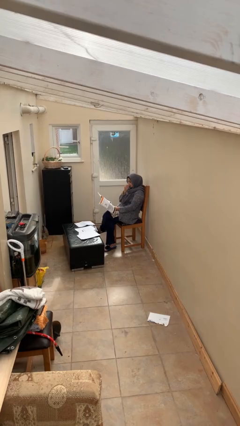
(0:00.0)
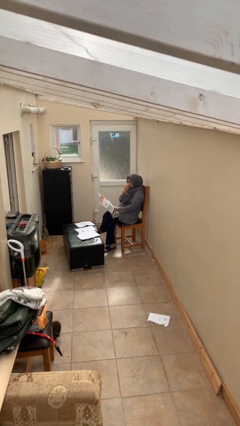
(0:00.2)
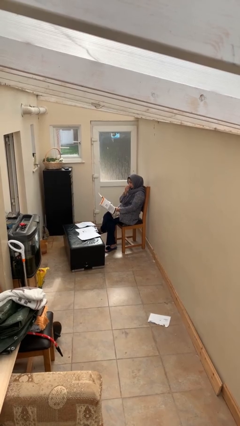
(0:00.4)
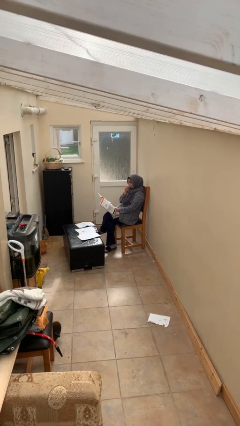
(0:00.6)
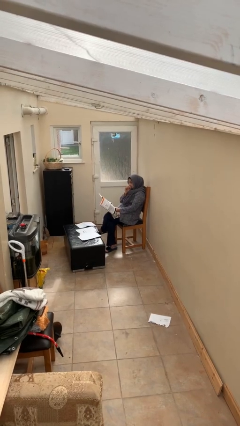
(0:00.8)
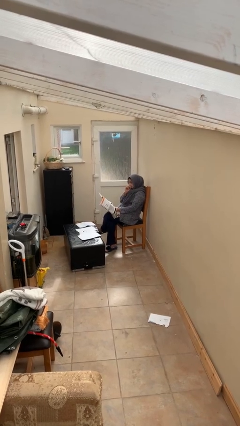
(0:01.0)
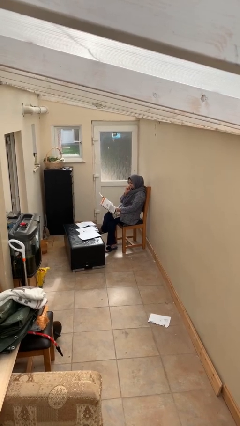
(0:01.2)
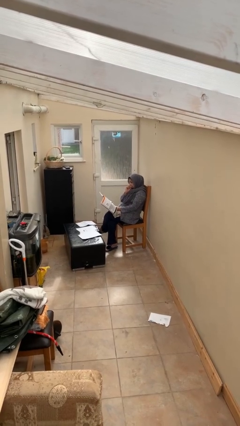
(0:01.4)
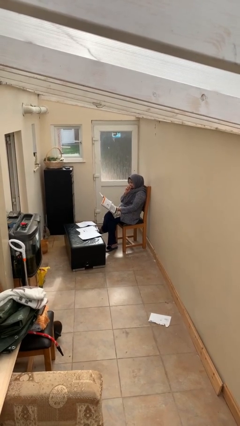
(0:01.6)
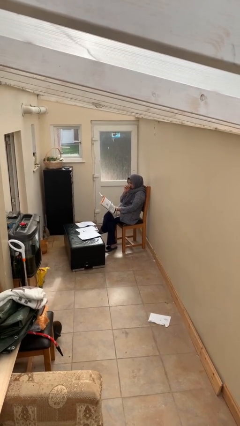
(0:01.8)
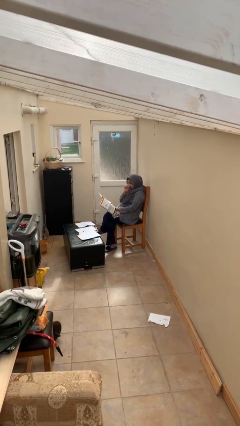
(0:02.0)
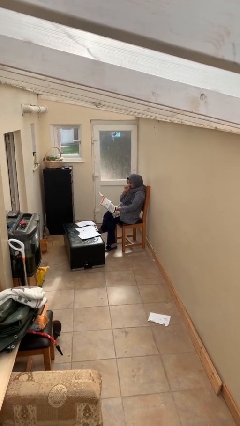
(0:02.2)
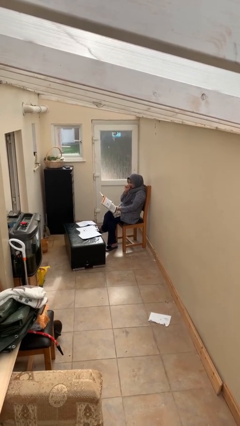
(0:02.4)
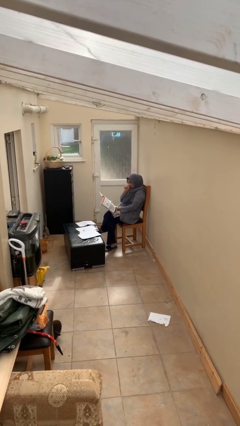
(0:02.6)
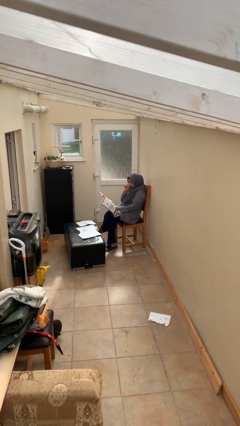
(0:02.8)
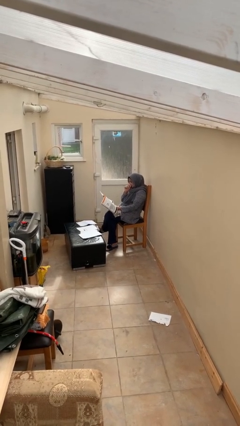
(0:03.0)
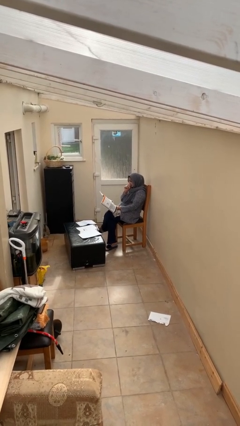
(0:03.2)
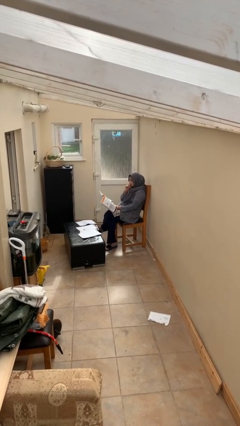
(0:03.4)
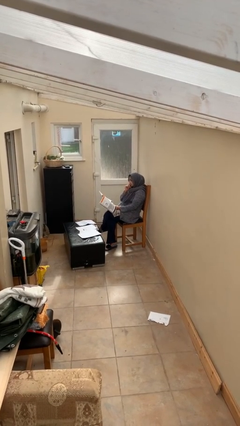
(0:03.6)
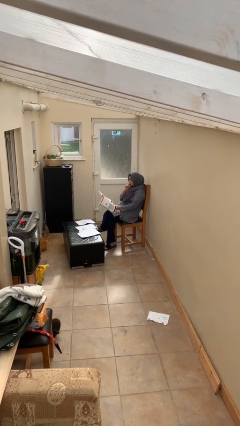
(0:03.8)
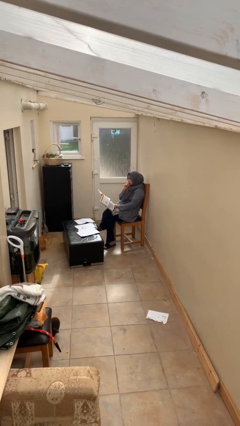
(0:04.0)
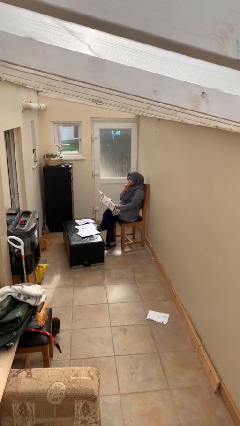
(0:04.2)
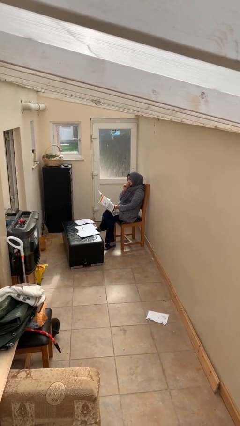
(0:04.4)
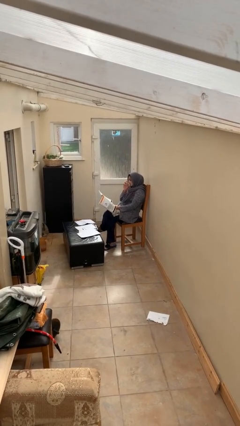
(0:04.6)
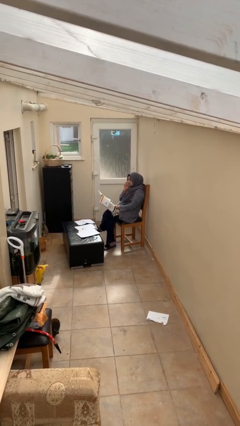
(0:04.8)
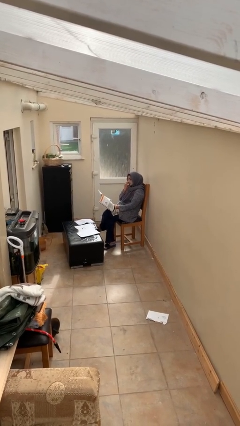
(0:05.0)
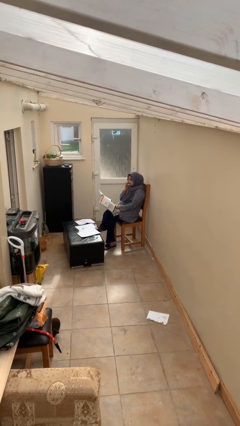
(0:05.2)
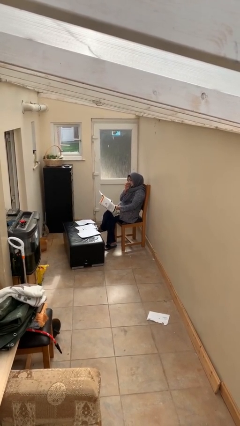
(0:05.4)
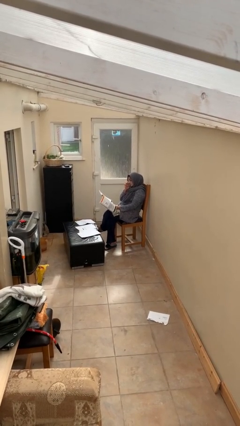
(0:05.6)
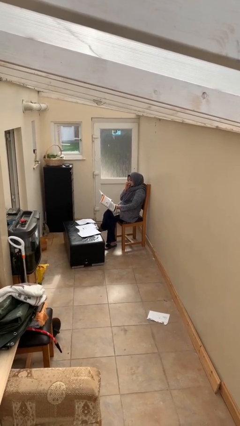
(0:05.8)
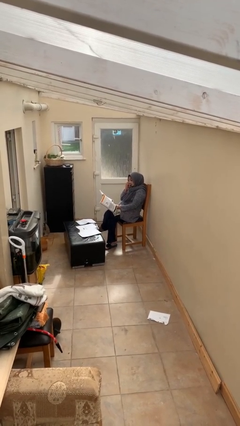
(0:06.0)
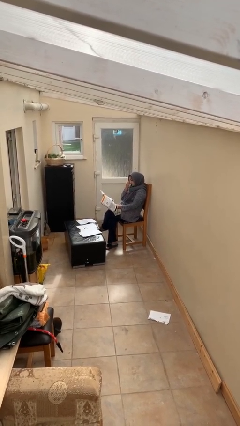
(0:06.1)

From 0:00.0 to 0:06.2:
person reads document

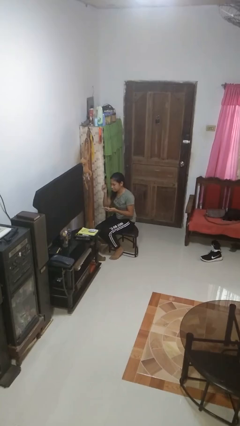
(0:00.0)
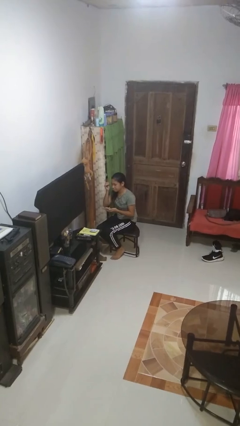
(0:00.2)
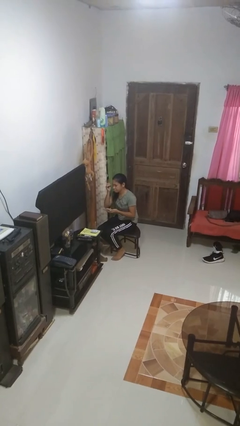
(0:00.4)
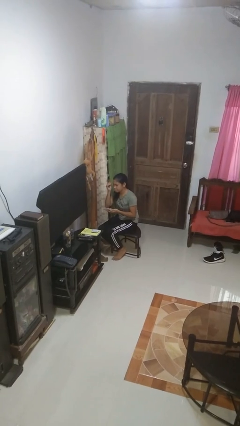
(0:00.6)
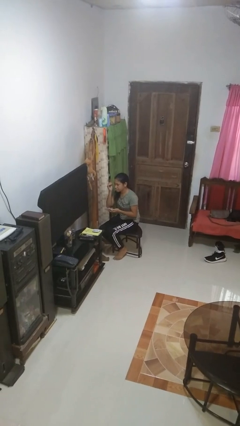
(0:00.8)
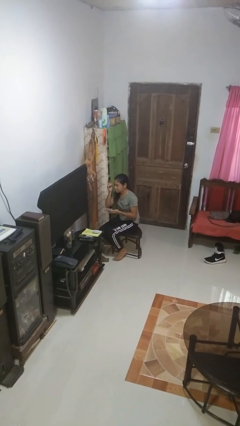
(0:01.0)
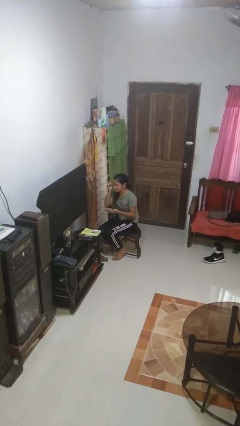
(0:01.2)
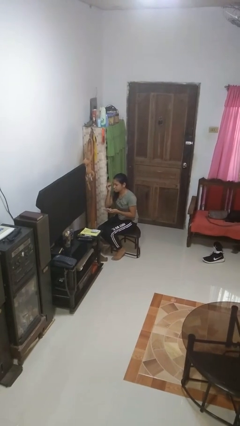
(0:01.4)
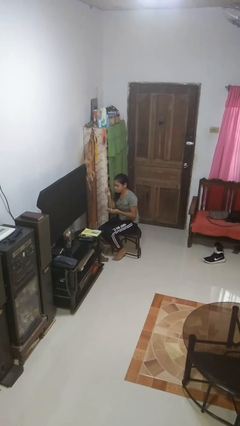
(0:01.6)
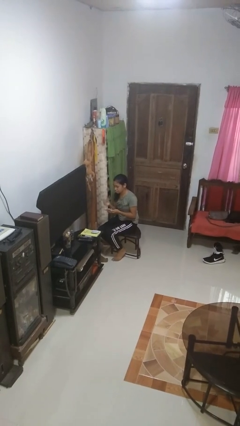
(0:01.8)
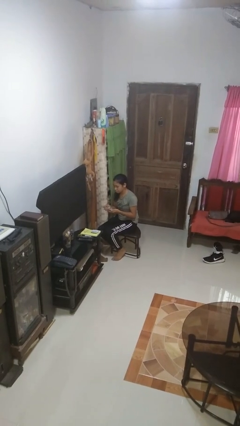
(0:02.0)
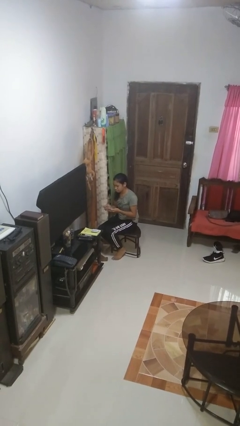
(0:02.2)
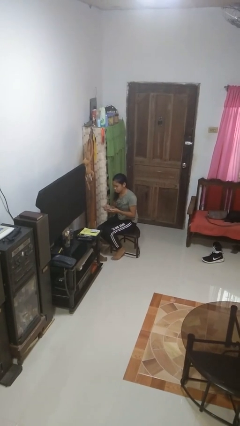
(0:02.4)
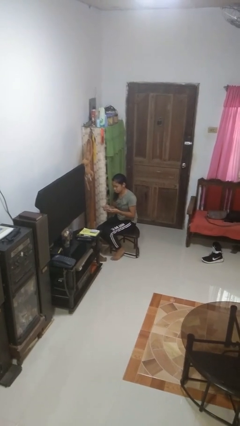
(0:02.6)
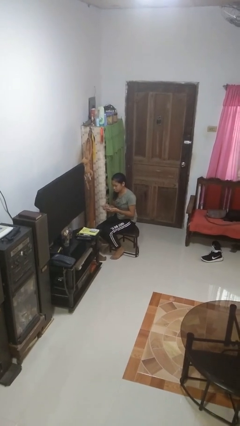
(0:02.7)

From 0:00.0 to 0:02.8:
person applies eye makeup

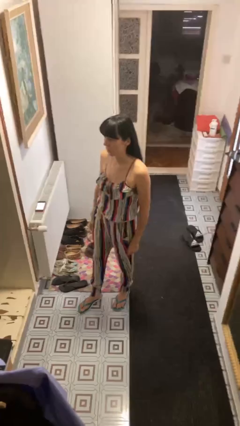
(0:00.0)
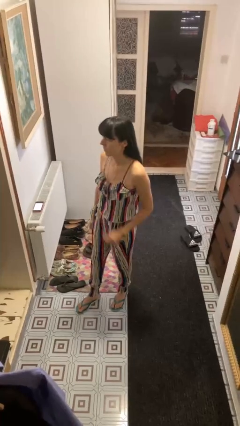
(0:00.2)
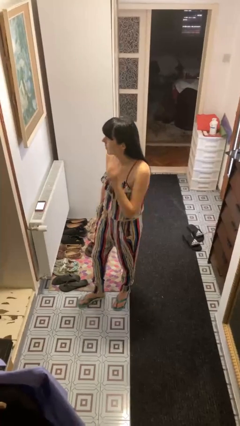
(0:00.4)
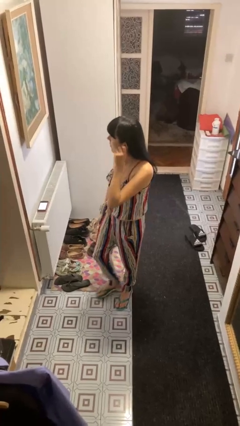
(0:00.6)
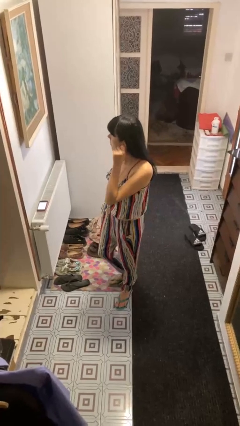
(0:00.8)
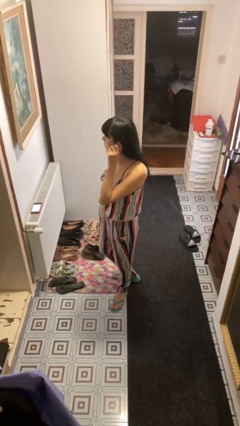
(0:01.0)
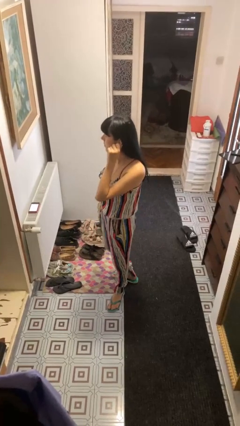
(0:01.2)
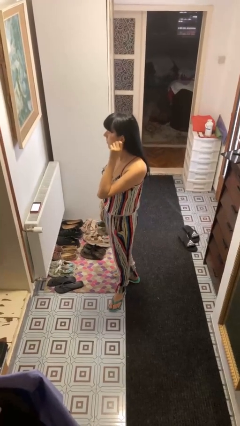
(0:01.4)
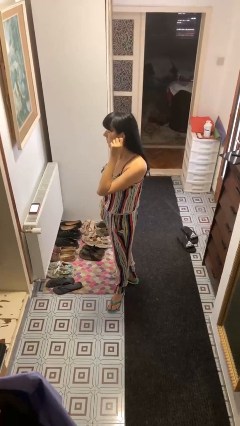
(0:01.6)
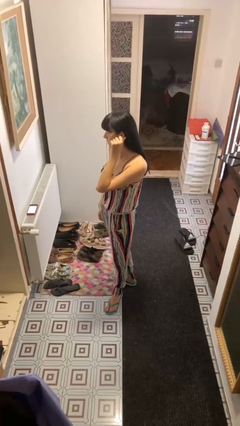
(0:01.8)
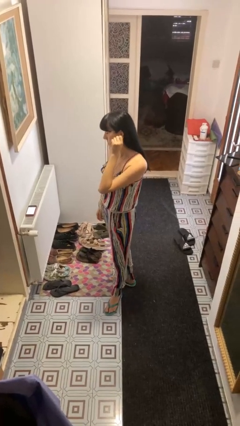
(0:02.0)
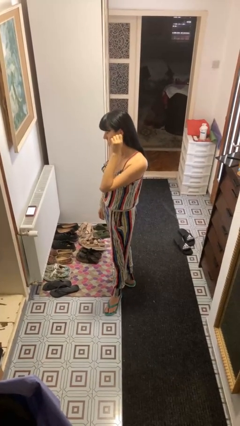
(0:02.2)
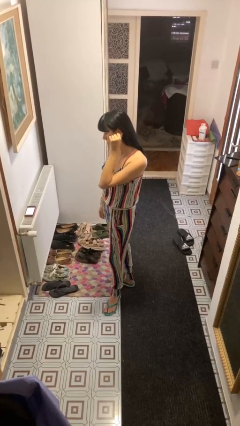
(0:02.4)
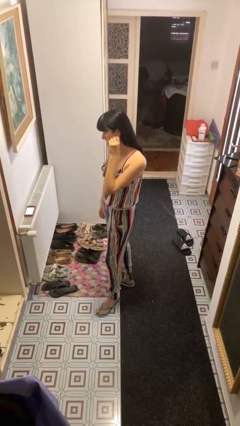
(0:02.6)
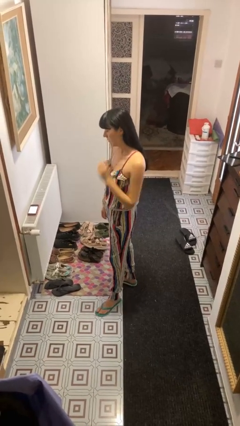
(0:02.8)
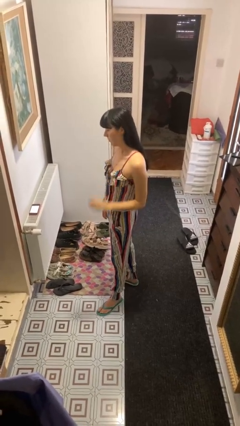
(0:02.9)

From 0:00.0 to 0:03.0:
person touches earlobe

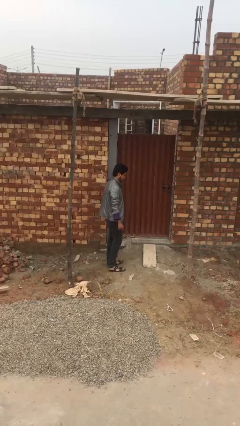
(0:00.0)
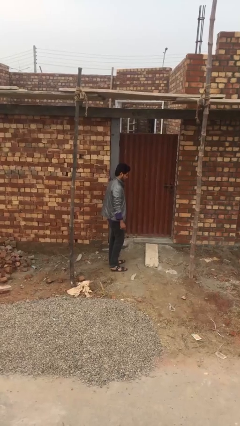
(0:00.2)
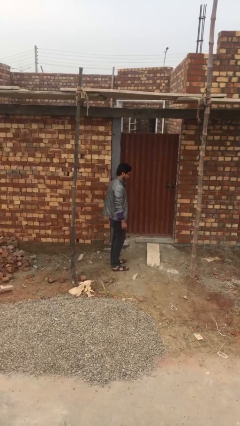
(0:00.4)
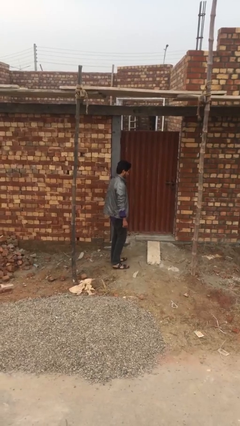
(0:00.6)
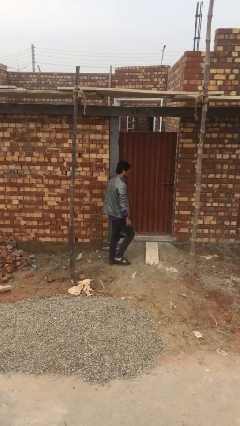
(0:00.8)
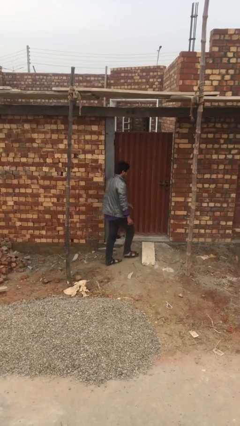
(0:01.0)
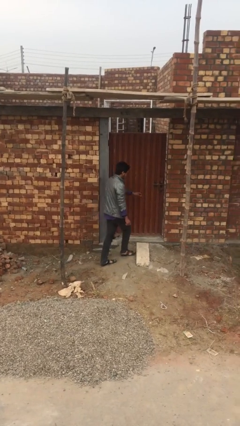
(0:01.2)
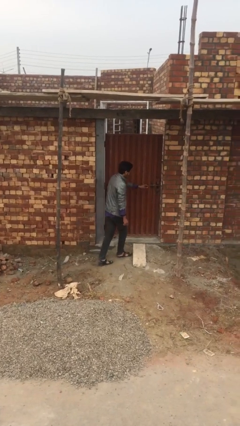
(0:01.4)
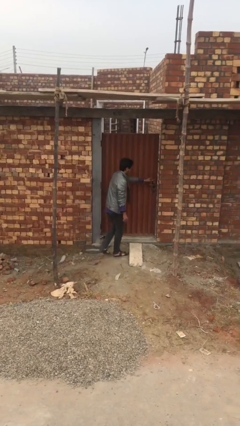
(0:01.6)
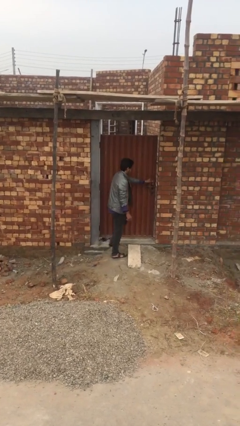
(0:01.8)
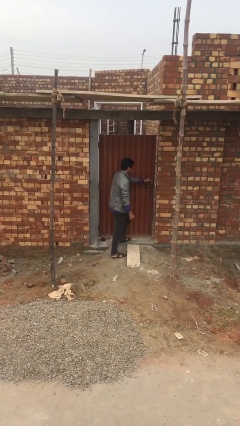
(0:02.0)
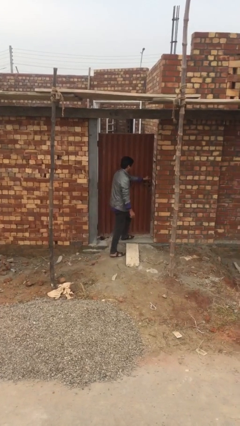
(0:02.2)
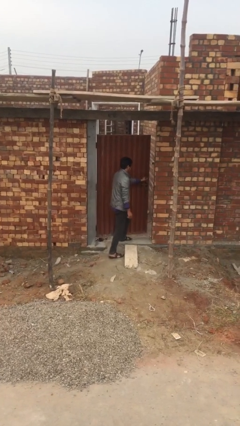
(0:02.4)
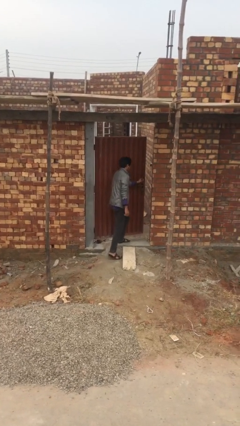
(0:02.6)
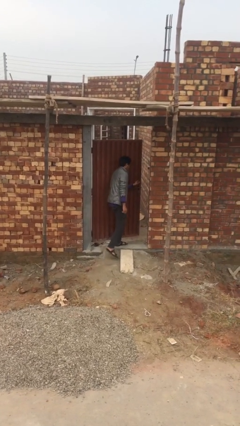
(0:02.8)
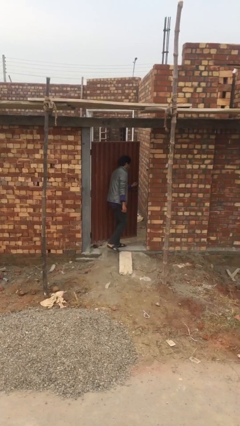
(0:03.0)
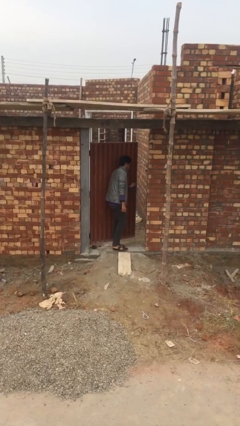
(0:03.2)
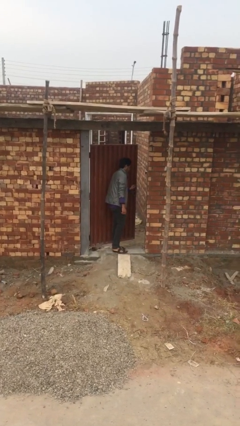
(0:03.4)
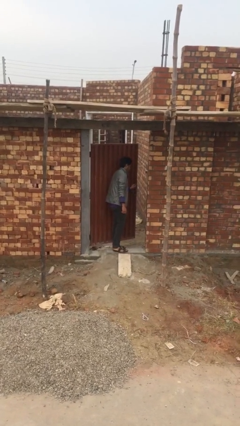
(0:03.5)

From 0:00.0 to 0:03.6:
person opens facility door

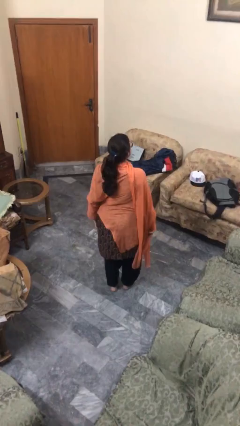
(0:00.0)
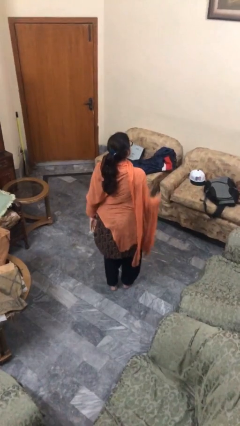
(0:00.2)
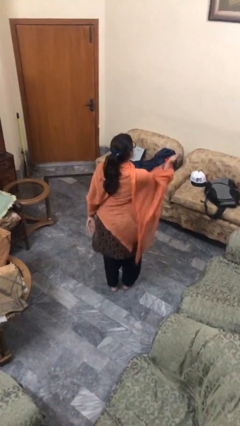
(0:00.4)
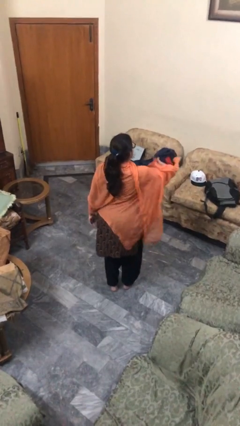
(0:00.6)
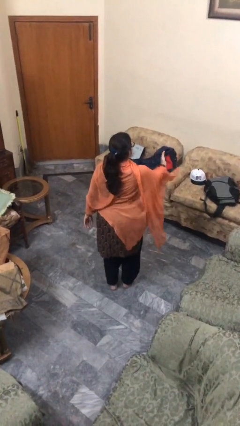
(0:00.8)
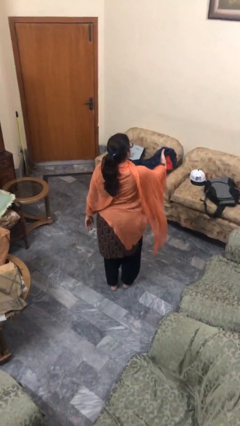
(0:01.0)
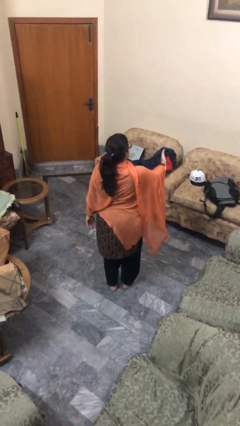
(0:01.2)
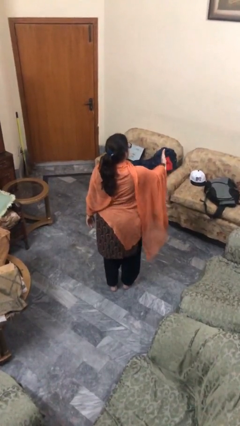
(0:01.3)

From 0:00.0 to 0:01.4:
person karate chop

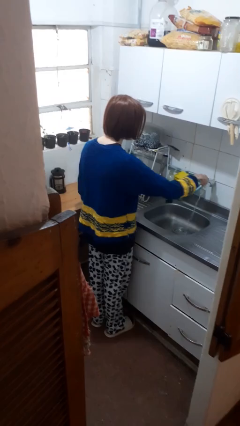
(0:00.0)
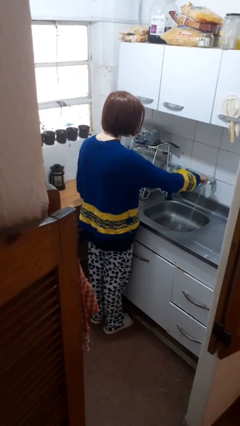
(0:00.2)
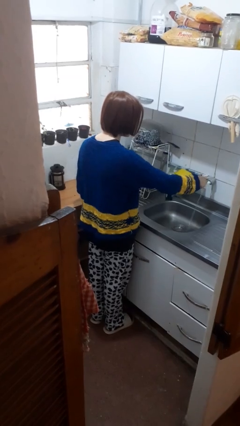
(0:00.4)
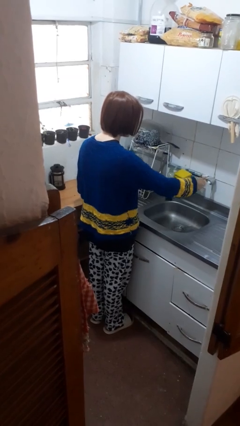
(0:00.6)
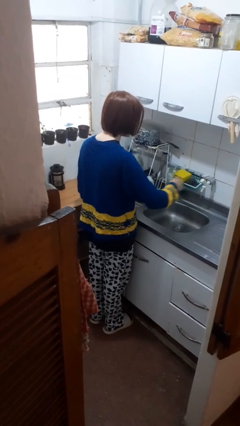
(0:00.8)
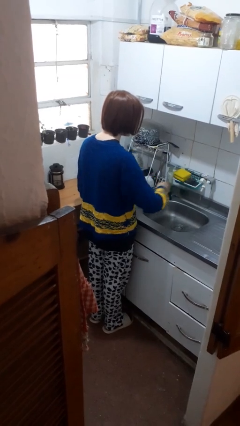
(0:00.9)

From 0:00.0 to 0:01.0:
person turns off faucet
